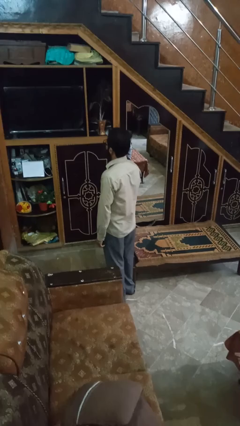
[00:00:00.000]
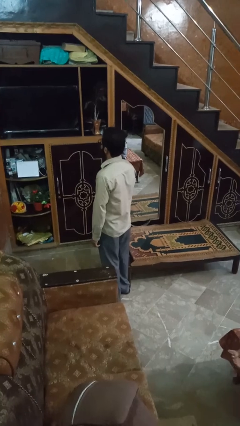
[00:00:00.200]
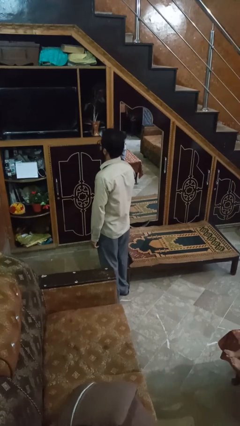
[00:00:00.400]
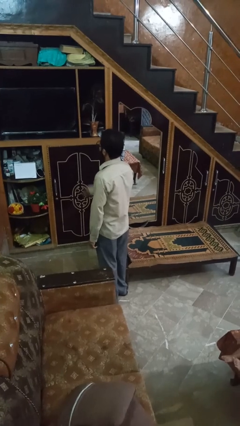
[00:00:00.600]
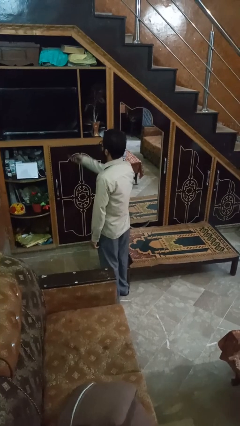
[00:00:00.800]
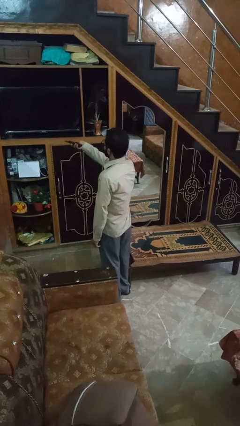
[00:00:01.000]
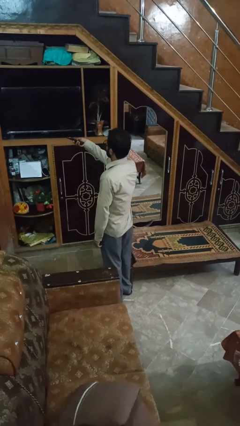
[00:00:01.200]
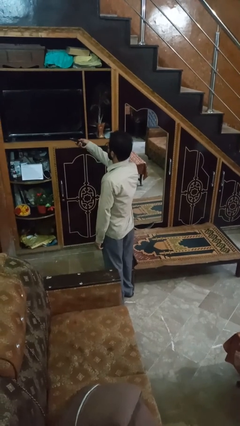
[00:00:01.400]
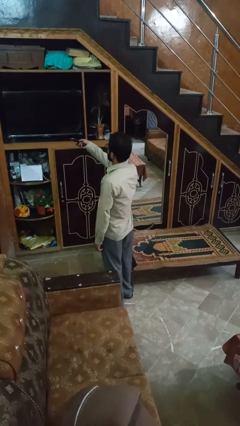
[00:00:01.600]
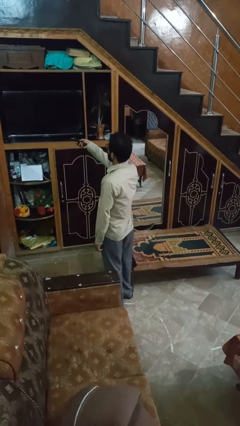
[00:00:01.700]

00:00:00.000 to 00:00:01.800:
person uses television remote

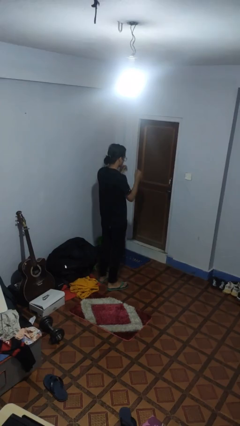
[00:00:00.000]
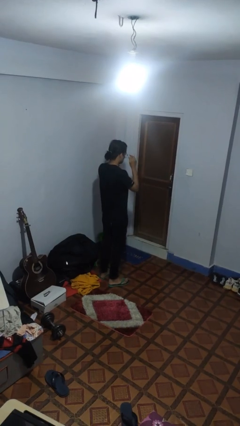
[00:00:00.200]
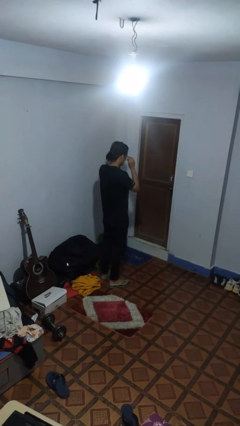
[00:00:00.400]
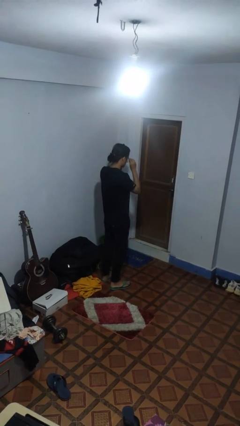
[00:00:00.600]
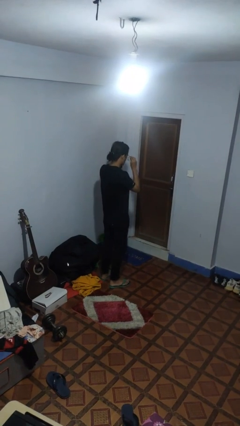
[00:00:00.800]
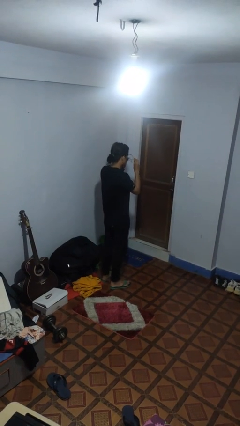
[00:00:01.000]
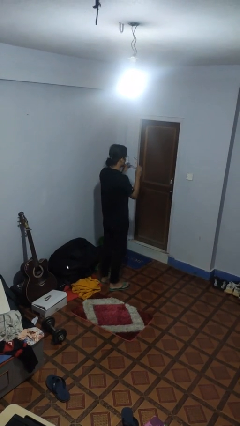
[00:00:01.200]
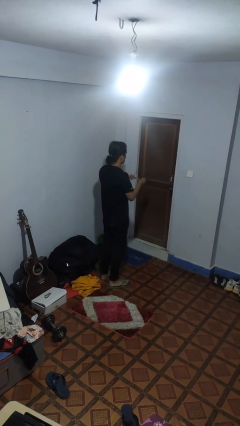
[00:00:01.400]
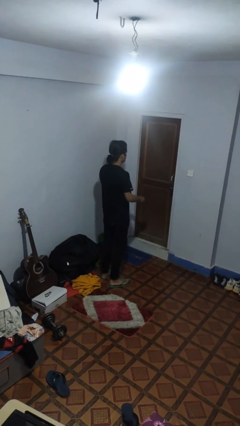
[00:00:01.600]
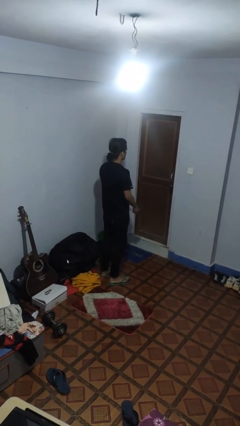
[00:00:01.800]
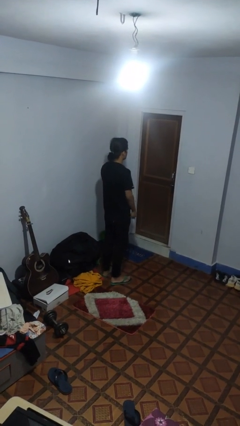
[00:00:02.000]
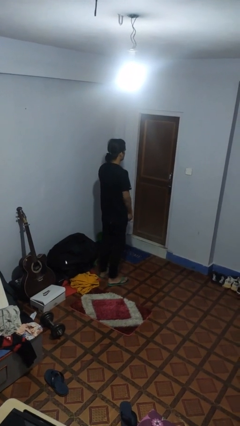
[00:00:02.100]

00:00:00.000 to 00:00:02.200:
person takes off glasses

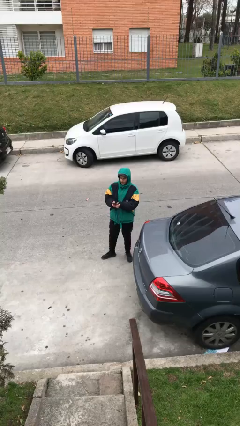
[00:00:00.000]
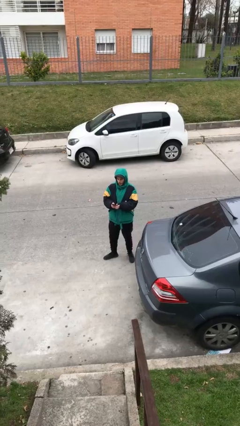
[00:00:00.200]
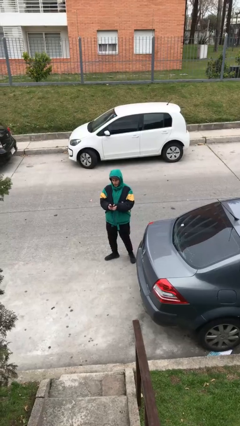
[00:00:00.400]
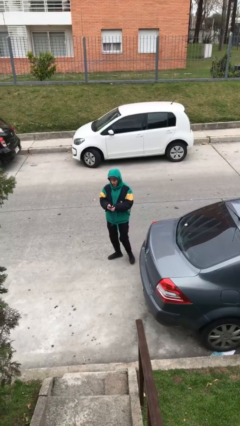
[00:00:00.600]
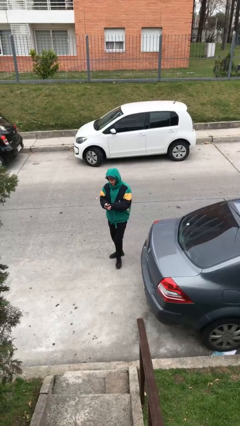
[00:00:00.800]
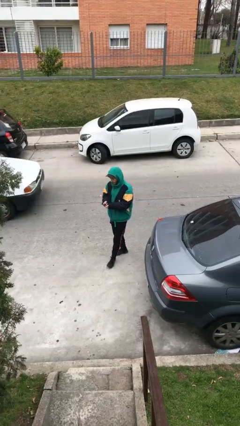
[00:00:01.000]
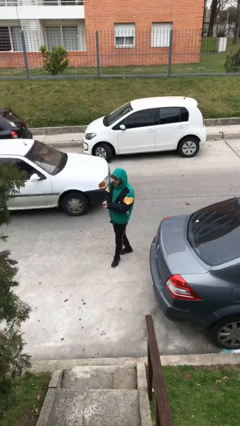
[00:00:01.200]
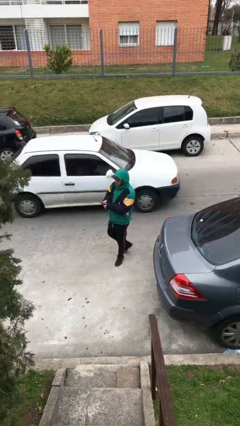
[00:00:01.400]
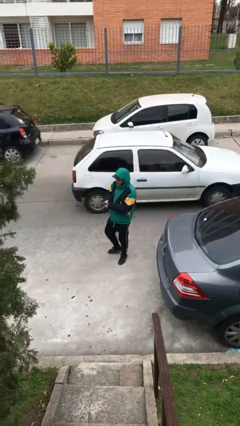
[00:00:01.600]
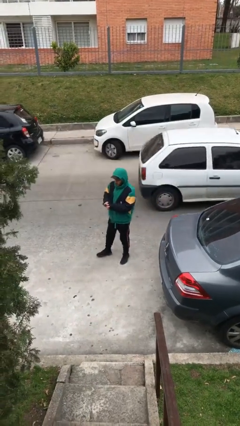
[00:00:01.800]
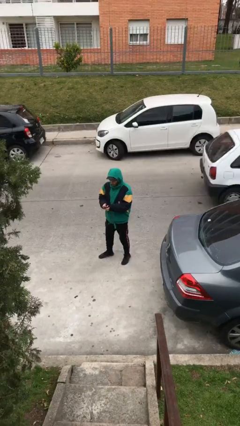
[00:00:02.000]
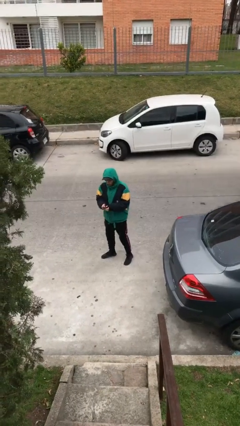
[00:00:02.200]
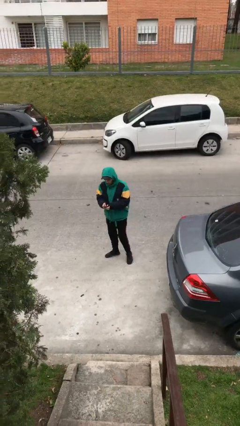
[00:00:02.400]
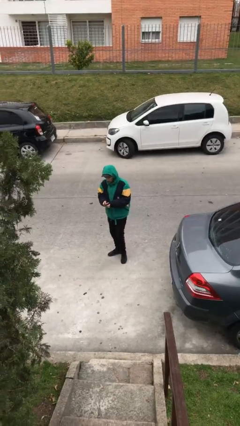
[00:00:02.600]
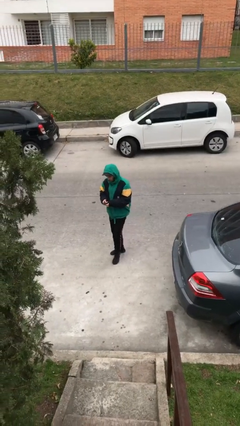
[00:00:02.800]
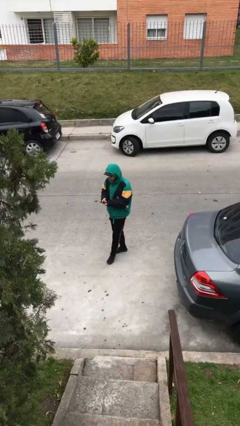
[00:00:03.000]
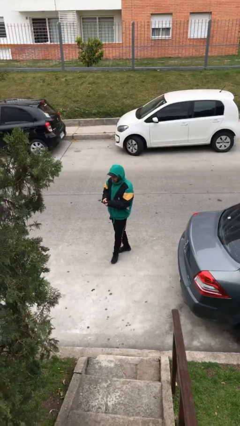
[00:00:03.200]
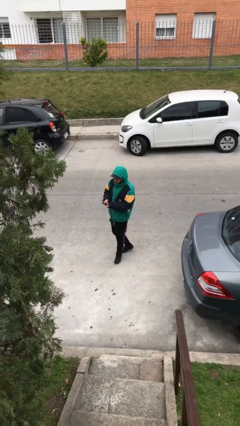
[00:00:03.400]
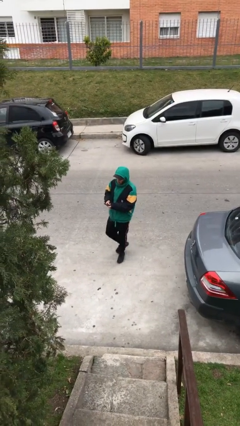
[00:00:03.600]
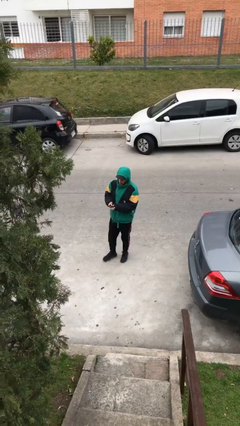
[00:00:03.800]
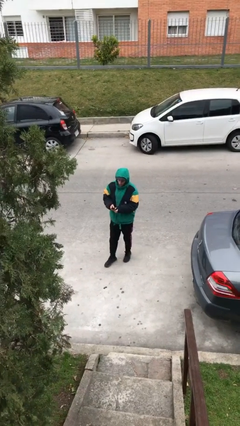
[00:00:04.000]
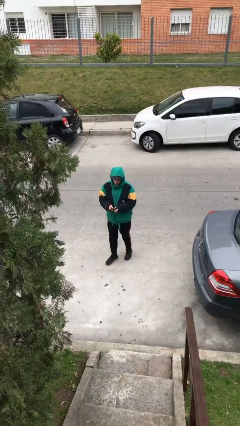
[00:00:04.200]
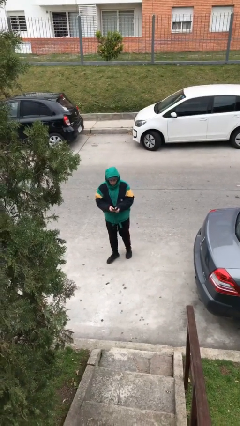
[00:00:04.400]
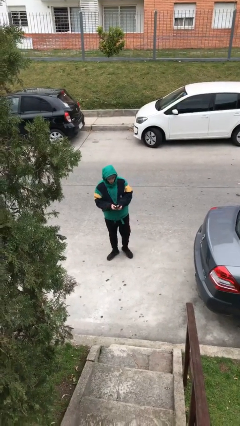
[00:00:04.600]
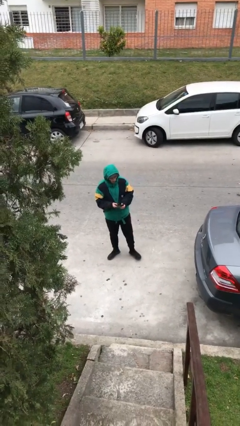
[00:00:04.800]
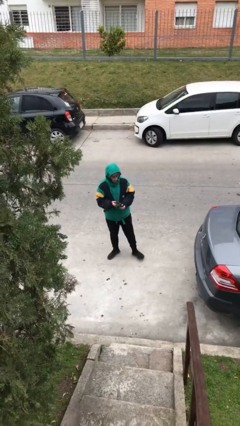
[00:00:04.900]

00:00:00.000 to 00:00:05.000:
person texts on phone

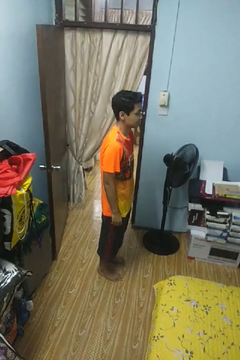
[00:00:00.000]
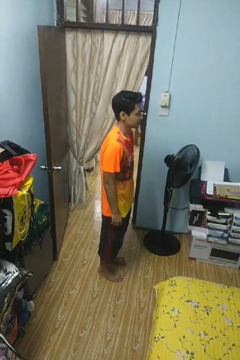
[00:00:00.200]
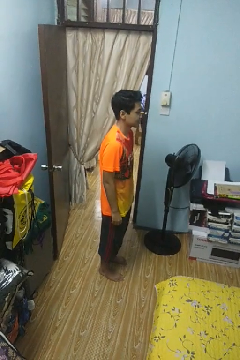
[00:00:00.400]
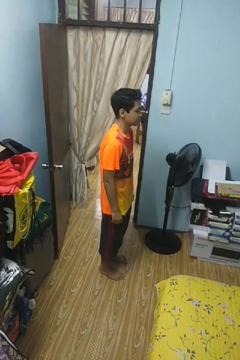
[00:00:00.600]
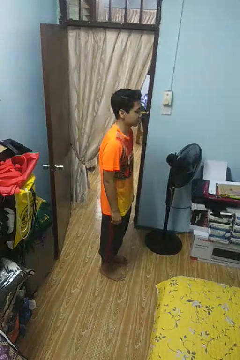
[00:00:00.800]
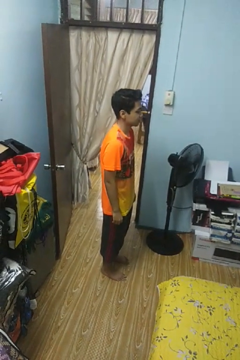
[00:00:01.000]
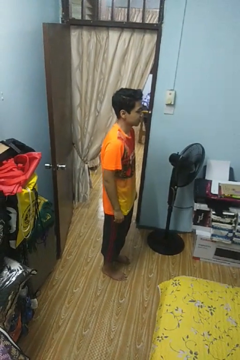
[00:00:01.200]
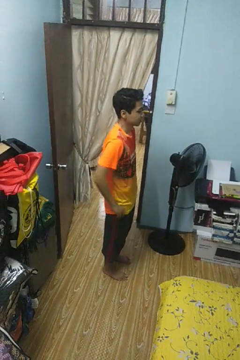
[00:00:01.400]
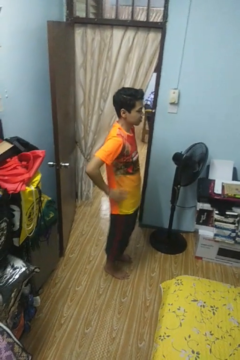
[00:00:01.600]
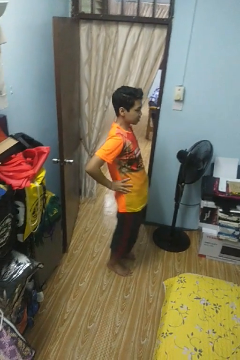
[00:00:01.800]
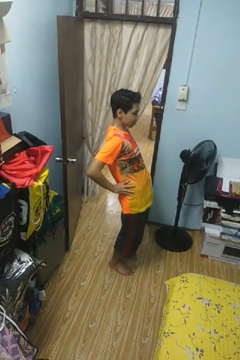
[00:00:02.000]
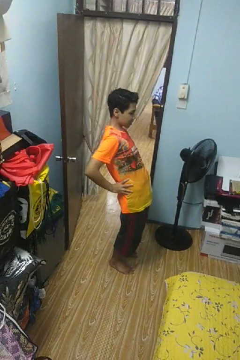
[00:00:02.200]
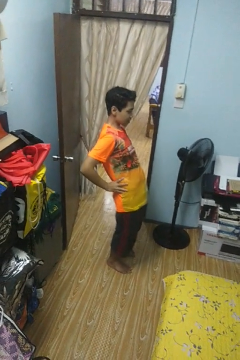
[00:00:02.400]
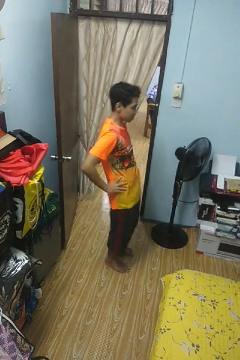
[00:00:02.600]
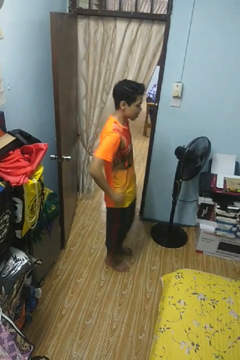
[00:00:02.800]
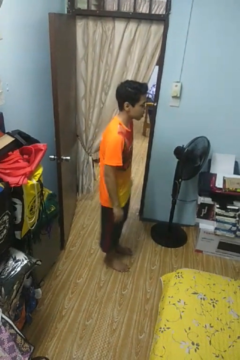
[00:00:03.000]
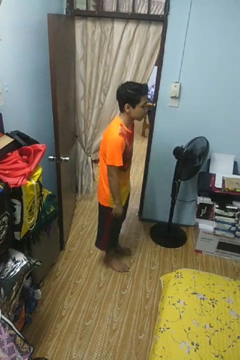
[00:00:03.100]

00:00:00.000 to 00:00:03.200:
person stretches back

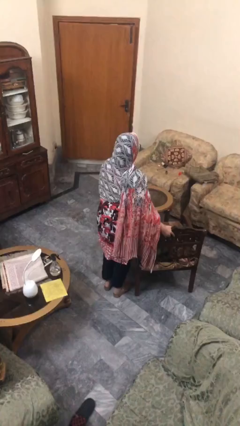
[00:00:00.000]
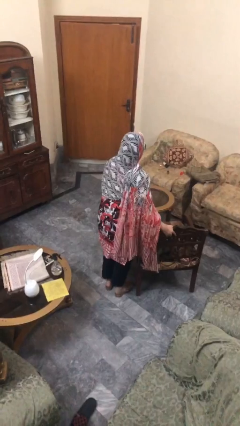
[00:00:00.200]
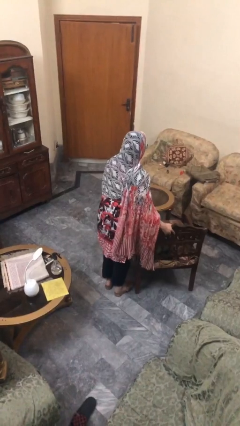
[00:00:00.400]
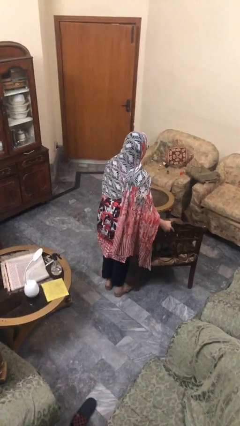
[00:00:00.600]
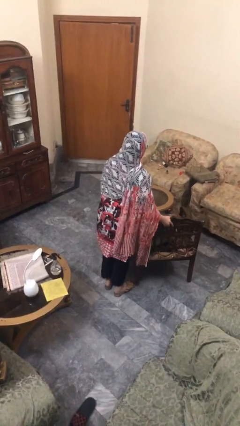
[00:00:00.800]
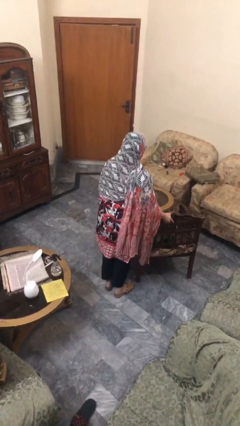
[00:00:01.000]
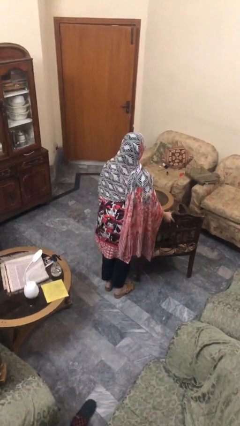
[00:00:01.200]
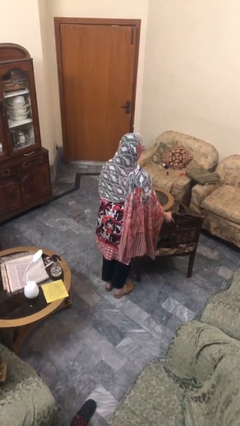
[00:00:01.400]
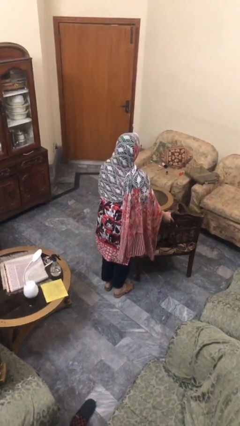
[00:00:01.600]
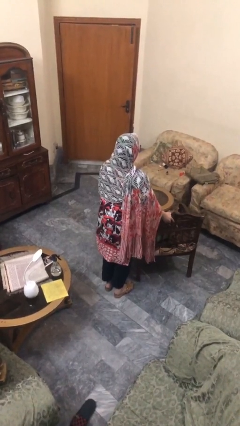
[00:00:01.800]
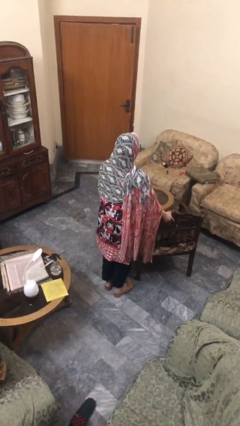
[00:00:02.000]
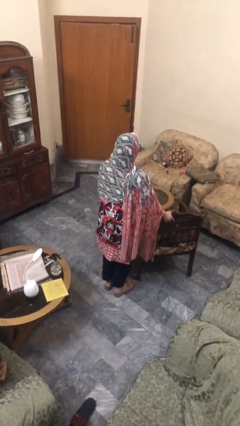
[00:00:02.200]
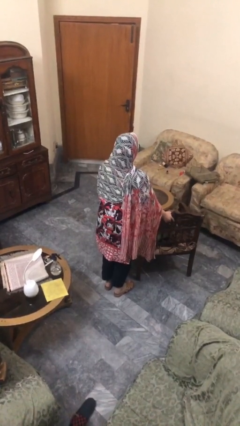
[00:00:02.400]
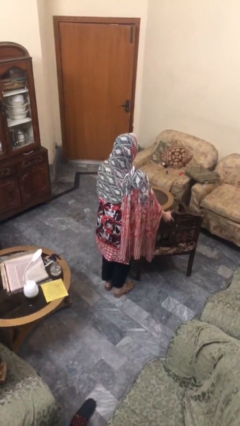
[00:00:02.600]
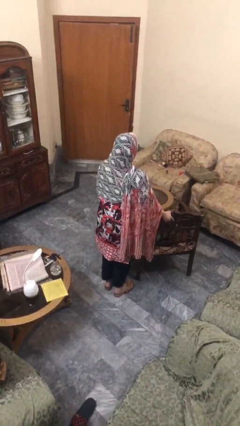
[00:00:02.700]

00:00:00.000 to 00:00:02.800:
person pushes in chair

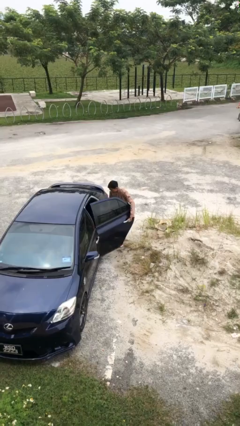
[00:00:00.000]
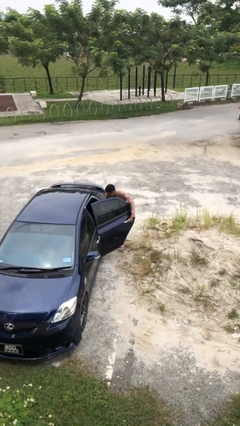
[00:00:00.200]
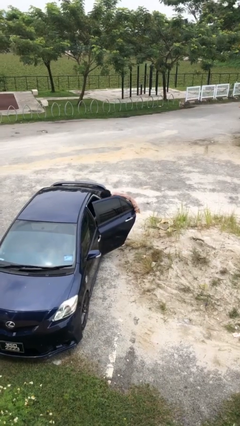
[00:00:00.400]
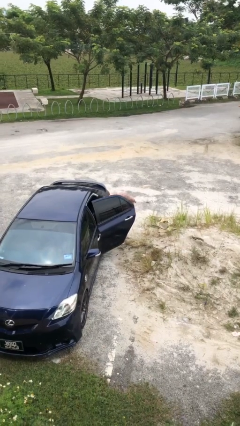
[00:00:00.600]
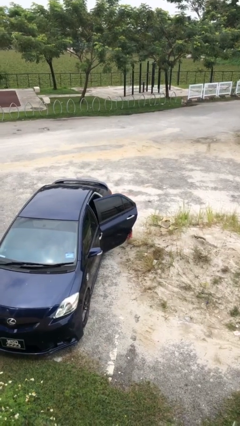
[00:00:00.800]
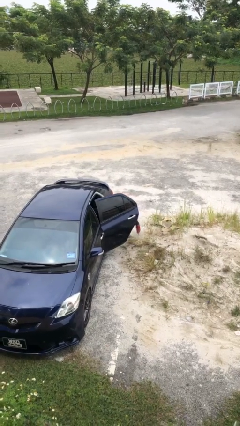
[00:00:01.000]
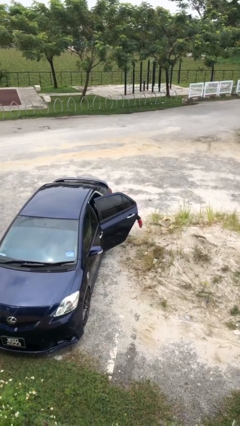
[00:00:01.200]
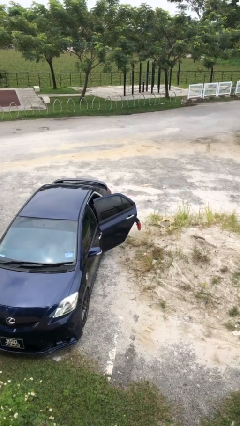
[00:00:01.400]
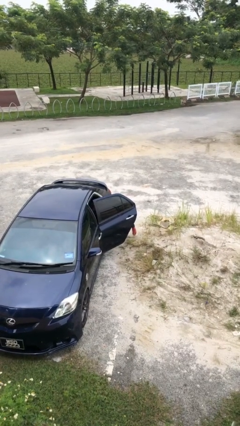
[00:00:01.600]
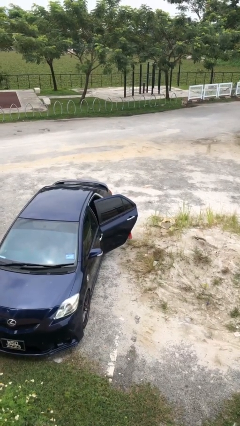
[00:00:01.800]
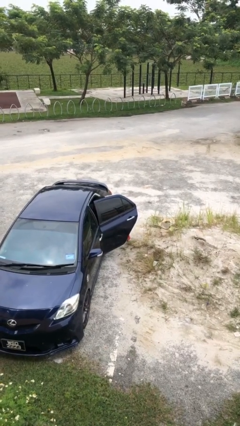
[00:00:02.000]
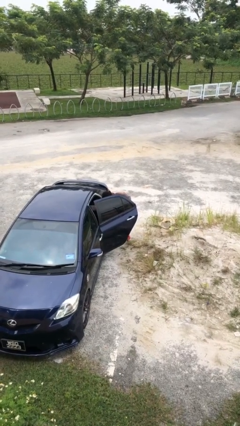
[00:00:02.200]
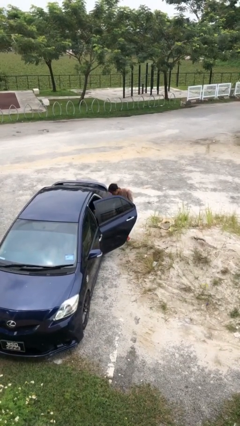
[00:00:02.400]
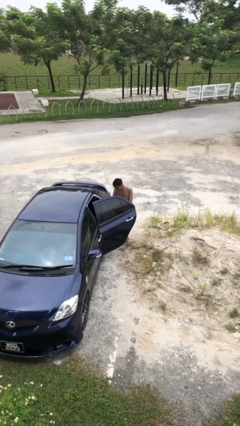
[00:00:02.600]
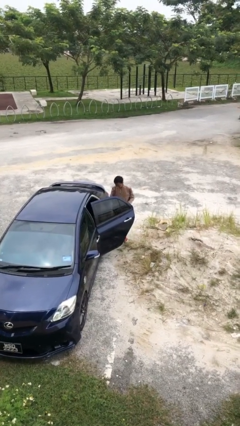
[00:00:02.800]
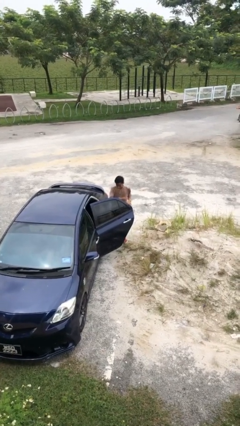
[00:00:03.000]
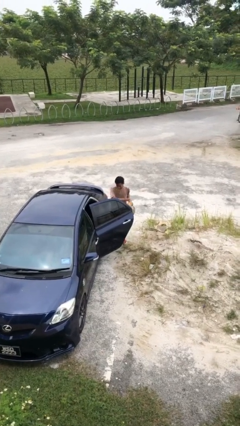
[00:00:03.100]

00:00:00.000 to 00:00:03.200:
person unloads car
